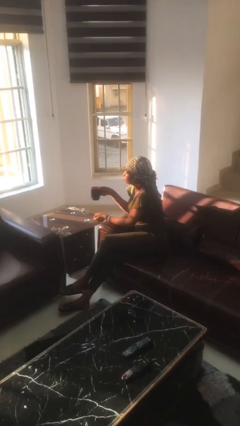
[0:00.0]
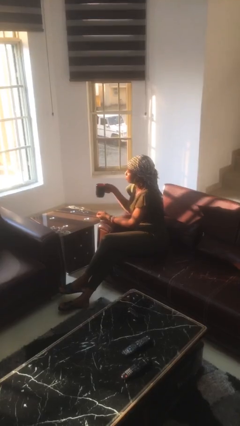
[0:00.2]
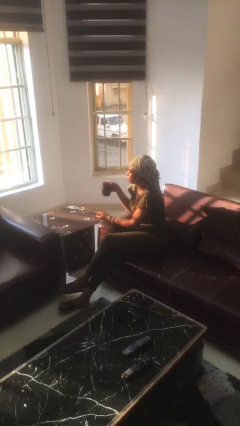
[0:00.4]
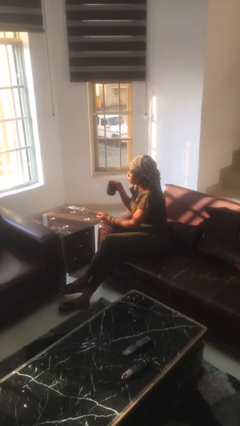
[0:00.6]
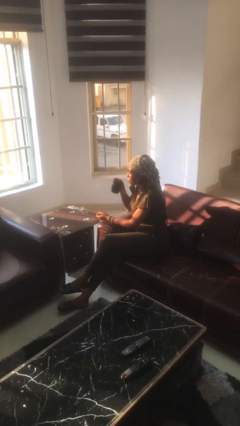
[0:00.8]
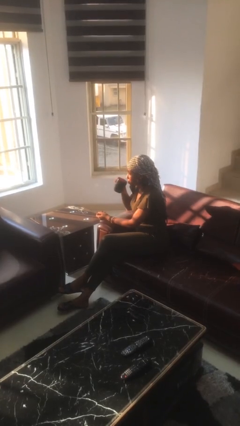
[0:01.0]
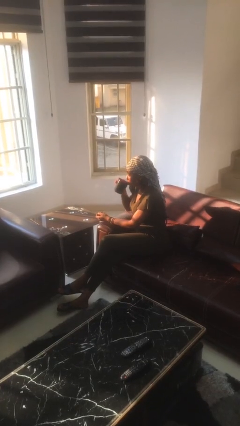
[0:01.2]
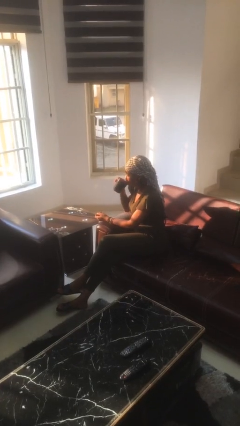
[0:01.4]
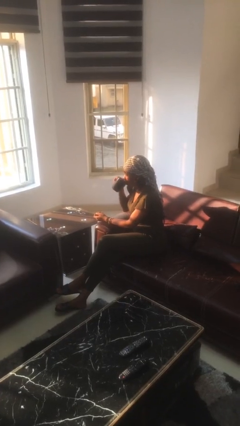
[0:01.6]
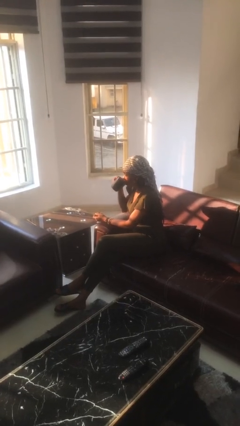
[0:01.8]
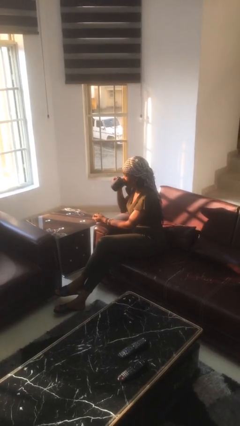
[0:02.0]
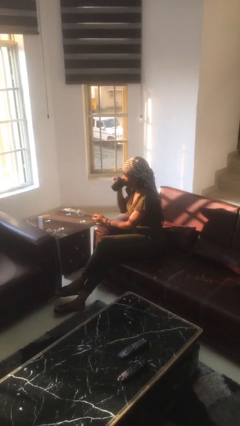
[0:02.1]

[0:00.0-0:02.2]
person drinks from mug

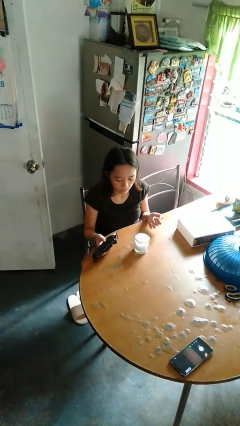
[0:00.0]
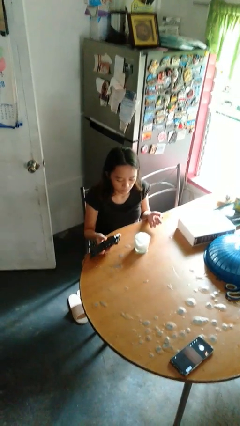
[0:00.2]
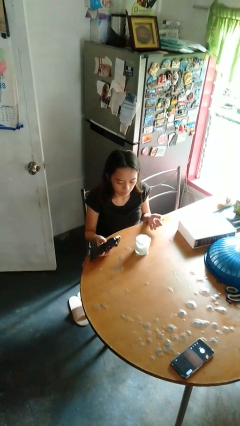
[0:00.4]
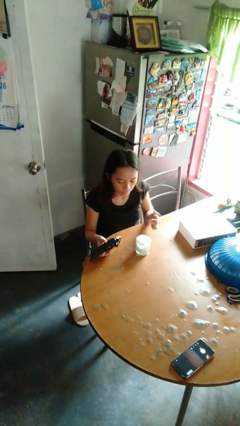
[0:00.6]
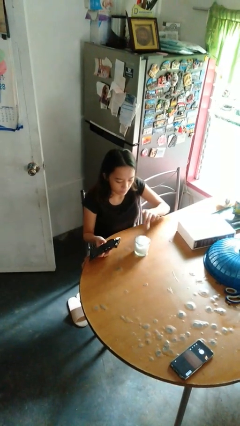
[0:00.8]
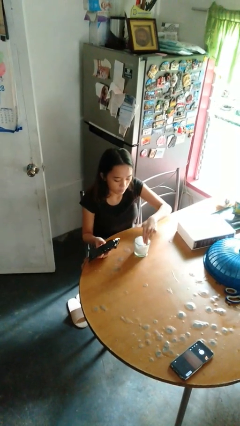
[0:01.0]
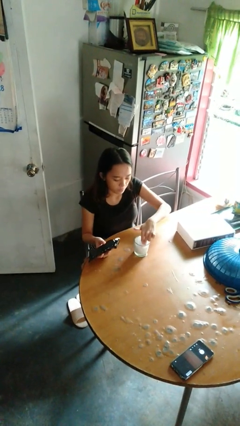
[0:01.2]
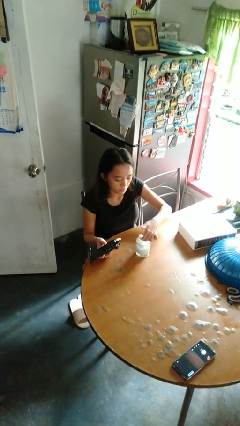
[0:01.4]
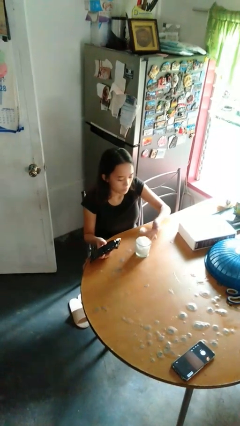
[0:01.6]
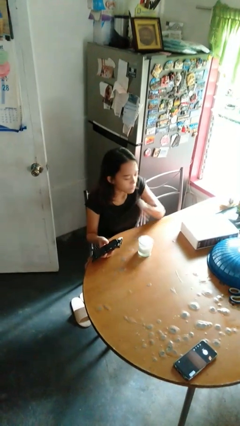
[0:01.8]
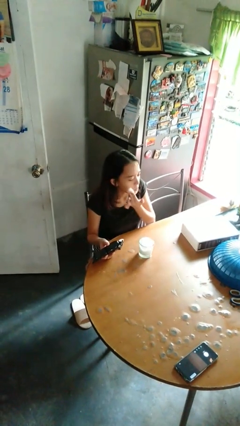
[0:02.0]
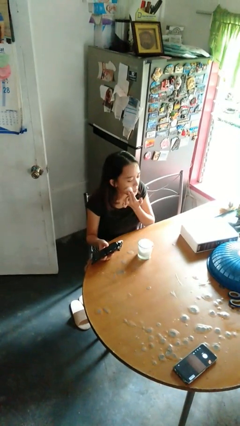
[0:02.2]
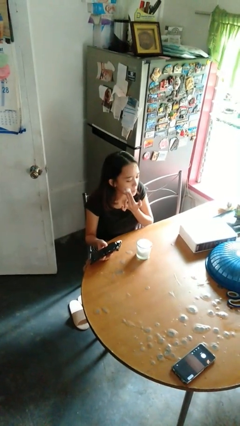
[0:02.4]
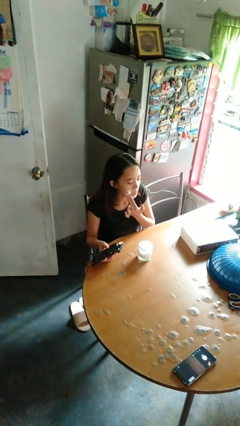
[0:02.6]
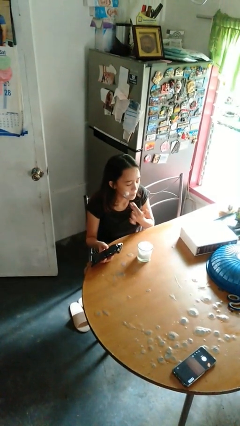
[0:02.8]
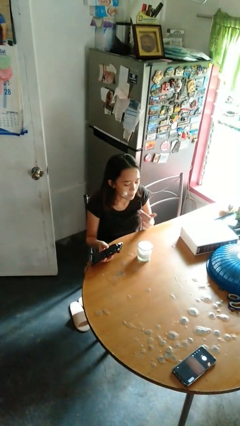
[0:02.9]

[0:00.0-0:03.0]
person applies shaving cream

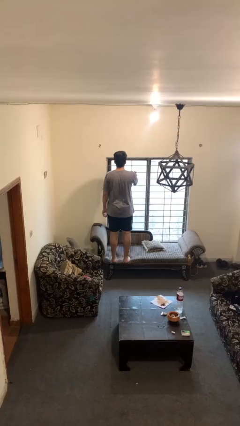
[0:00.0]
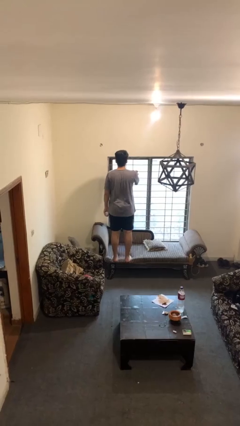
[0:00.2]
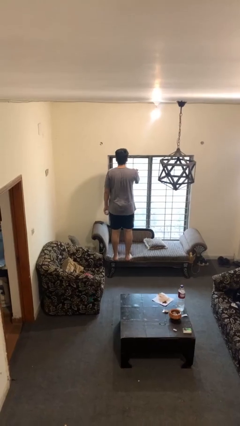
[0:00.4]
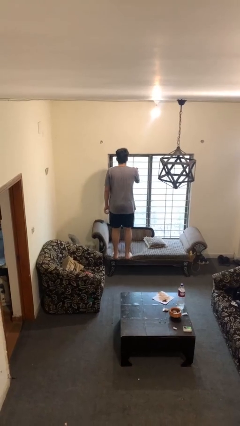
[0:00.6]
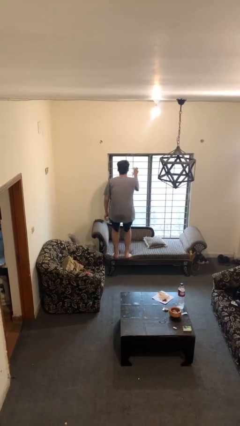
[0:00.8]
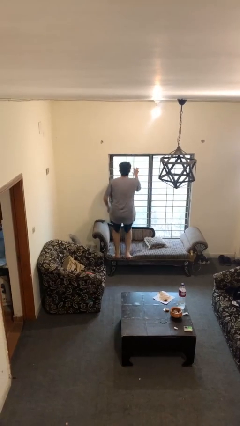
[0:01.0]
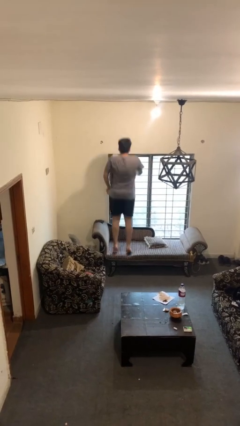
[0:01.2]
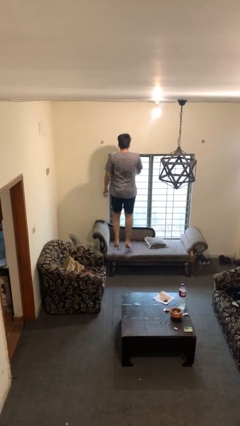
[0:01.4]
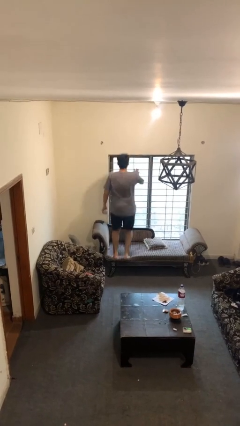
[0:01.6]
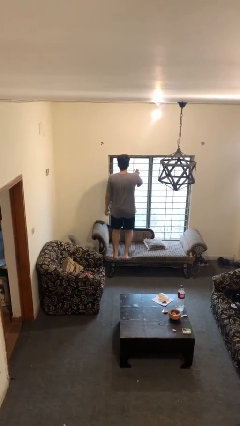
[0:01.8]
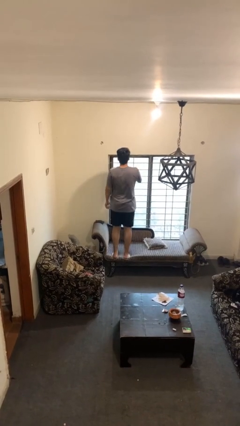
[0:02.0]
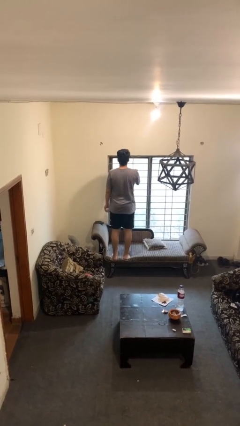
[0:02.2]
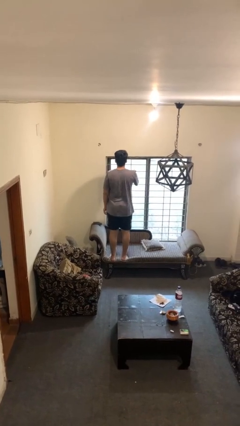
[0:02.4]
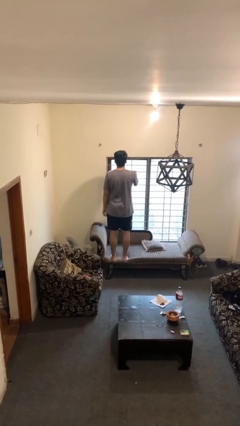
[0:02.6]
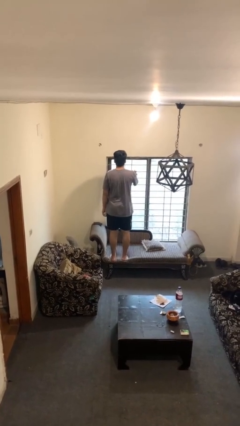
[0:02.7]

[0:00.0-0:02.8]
person jumps on couch

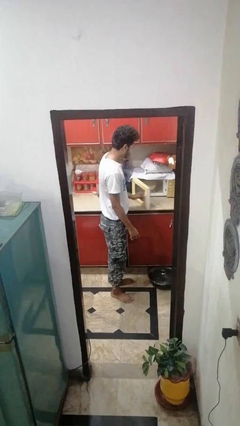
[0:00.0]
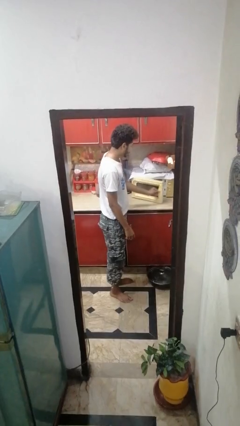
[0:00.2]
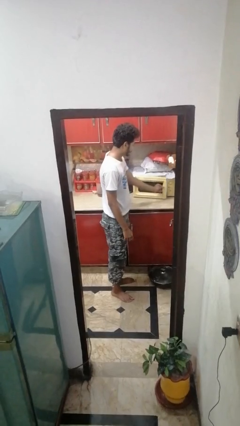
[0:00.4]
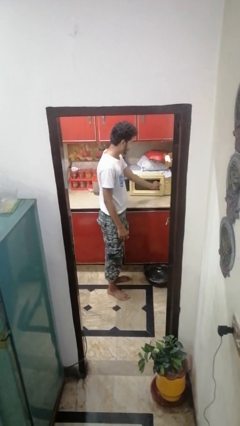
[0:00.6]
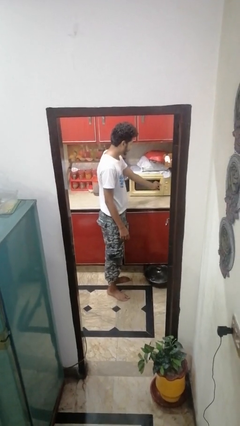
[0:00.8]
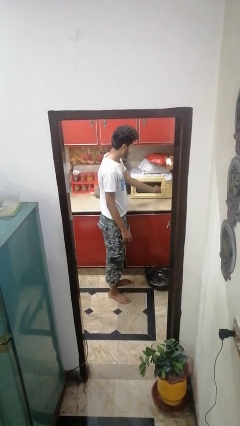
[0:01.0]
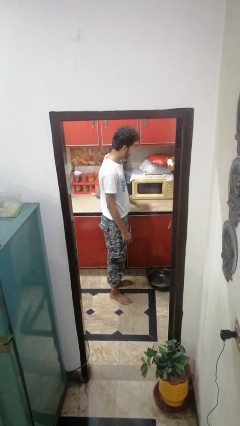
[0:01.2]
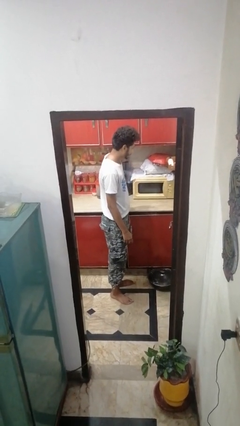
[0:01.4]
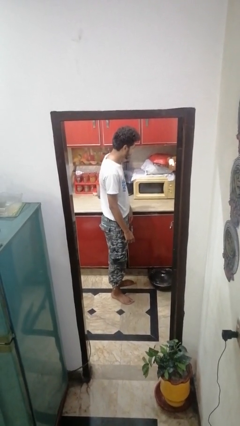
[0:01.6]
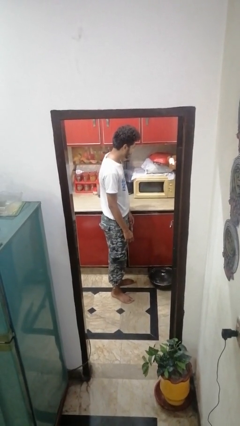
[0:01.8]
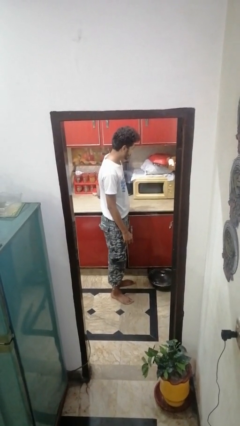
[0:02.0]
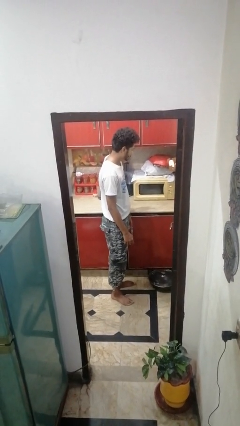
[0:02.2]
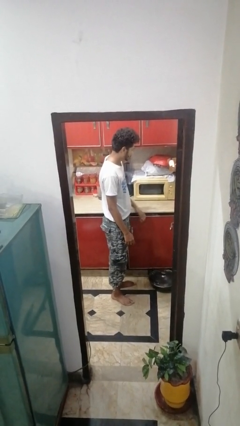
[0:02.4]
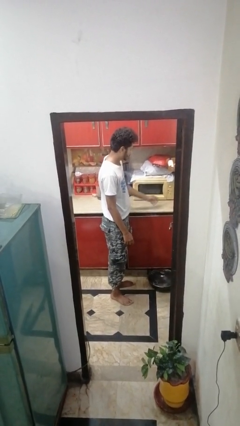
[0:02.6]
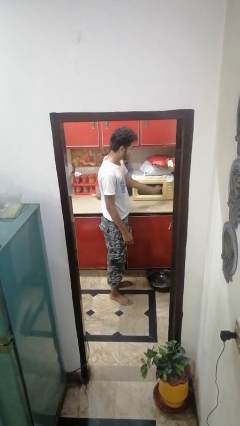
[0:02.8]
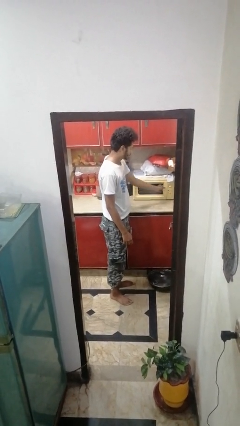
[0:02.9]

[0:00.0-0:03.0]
person closes microwave

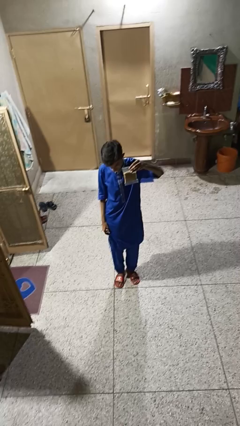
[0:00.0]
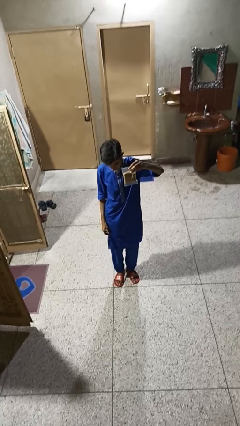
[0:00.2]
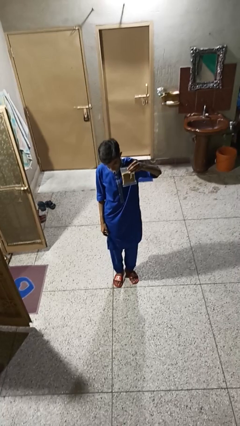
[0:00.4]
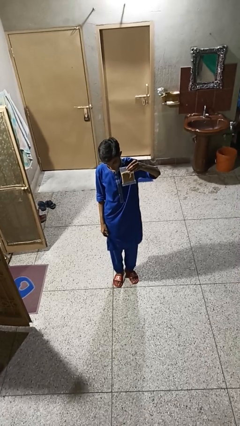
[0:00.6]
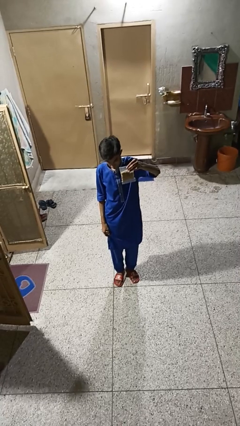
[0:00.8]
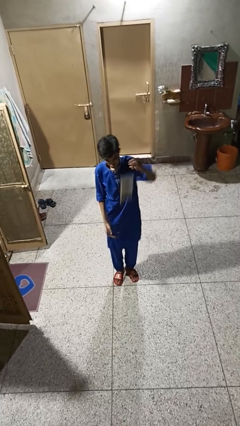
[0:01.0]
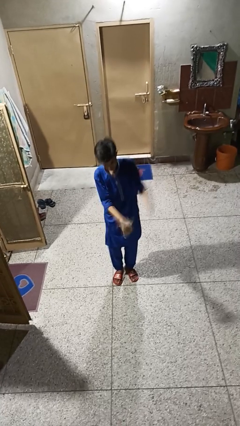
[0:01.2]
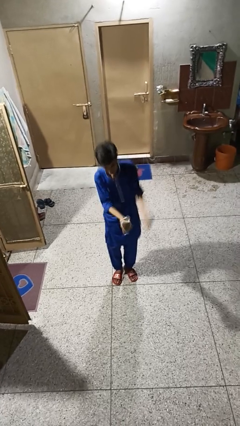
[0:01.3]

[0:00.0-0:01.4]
person drops object

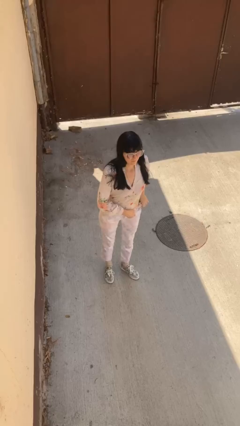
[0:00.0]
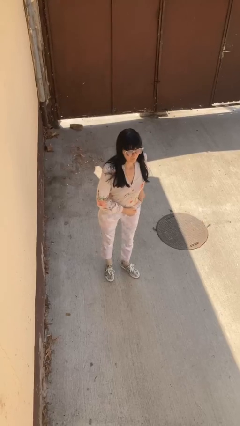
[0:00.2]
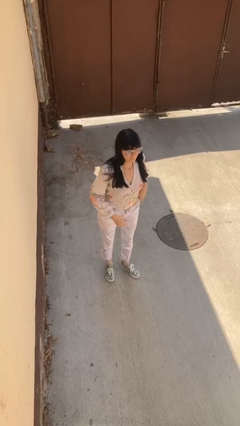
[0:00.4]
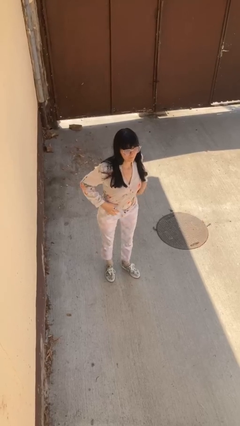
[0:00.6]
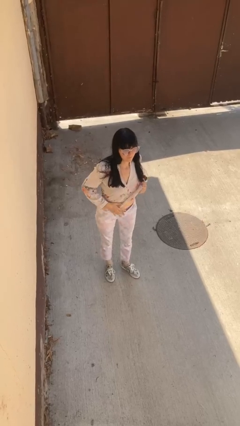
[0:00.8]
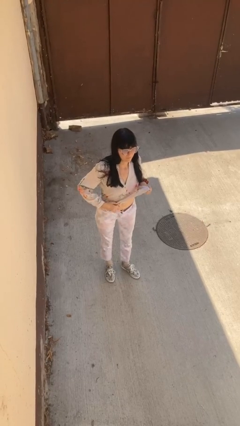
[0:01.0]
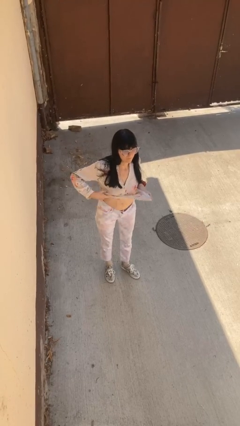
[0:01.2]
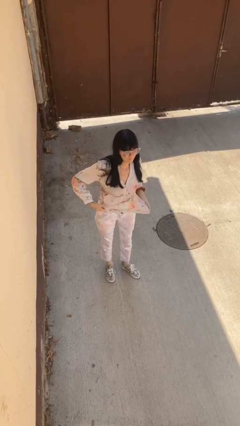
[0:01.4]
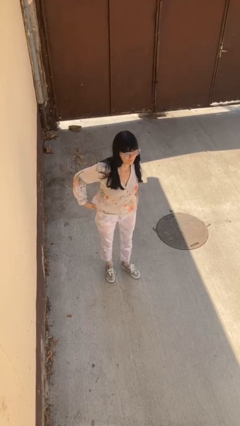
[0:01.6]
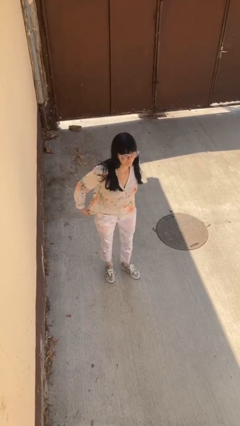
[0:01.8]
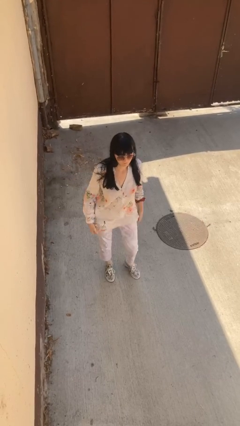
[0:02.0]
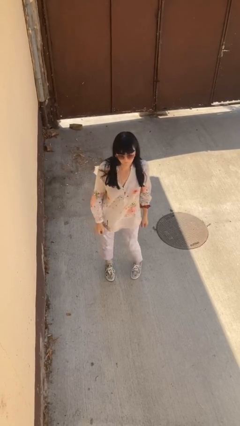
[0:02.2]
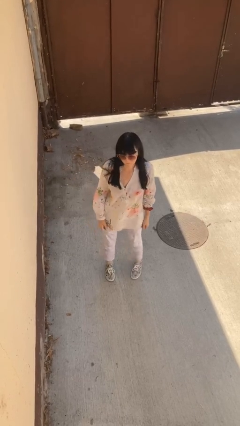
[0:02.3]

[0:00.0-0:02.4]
person untucks shirt

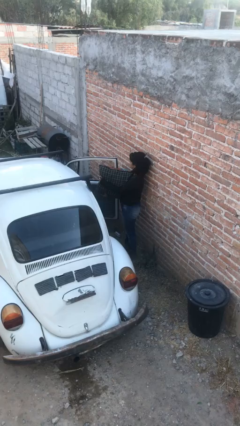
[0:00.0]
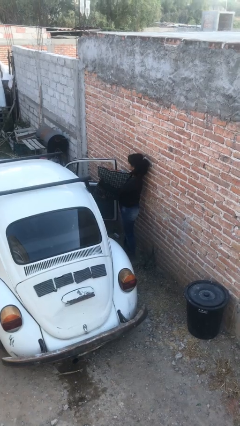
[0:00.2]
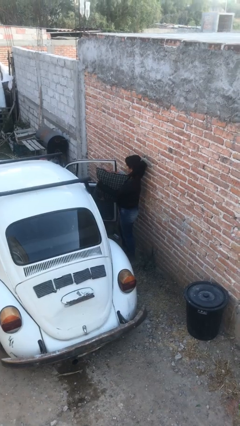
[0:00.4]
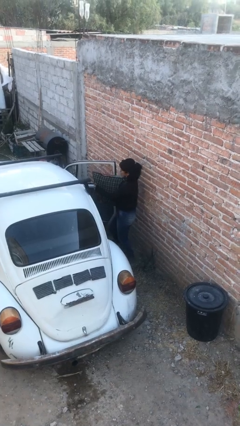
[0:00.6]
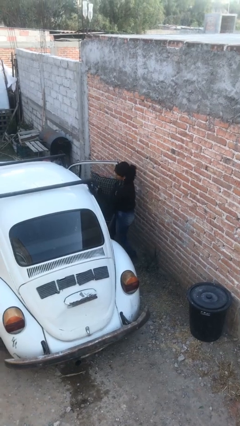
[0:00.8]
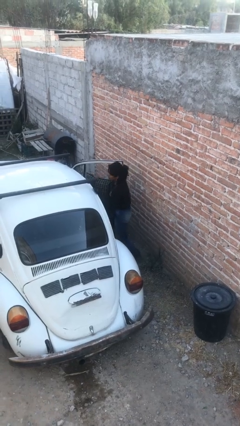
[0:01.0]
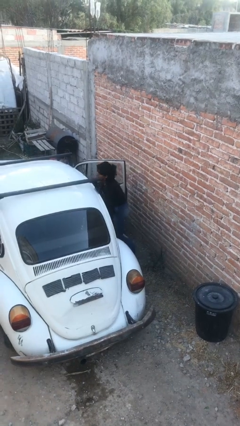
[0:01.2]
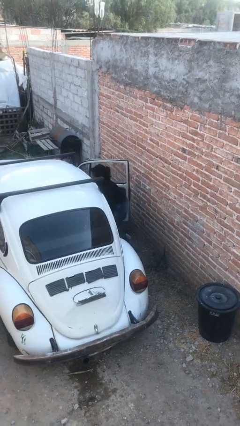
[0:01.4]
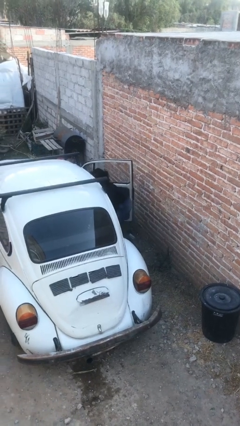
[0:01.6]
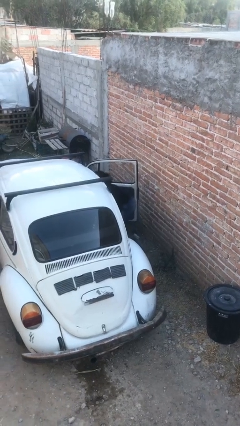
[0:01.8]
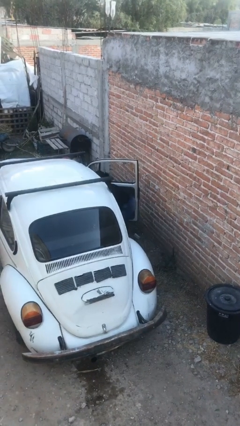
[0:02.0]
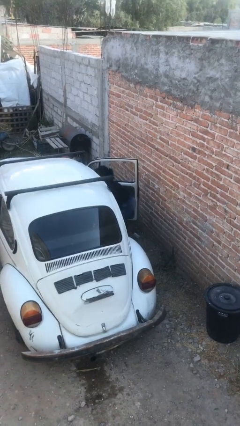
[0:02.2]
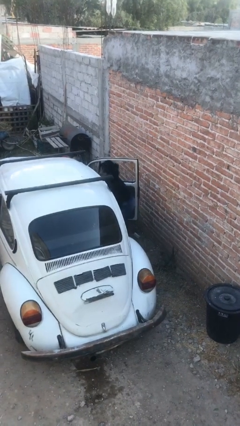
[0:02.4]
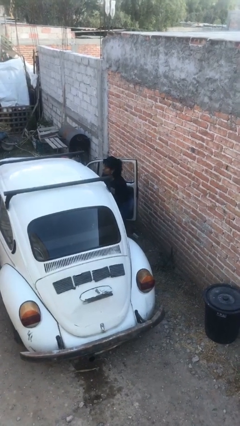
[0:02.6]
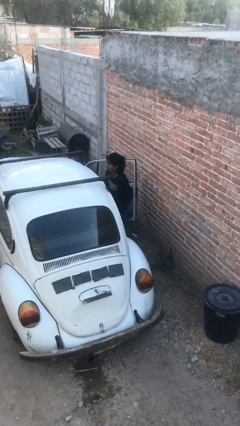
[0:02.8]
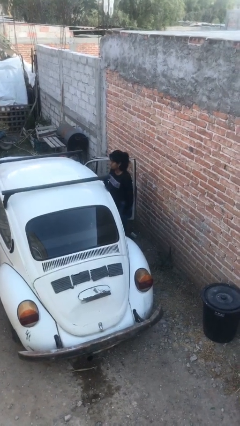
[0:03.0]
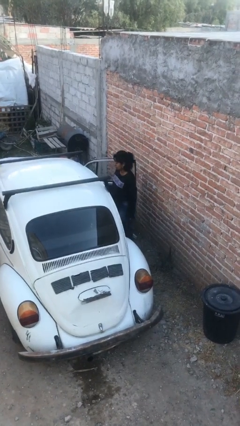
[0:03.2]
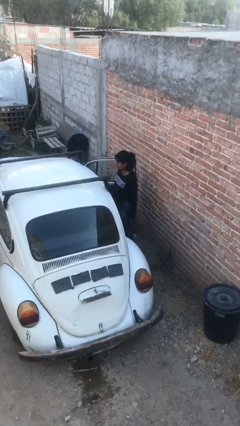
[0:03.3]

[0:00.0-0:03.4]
person loads car
